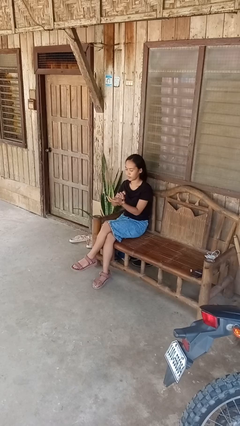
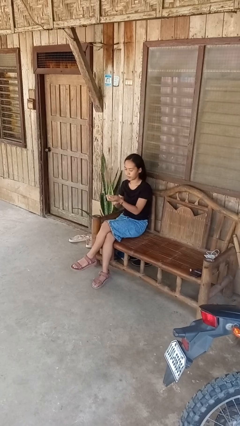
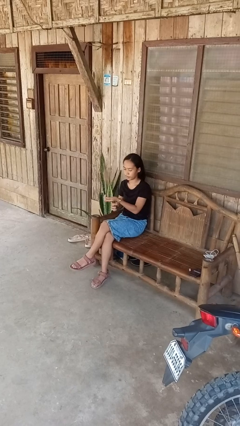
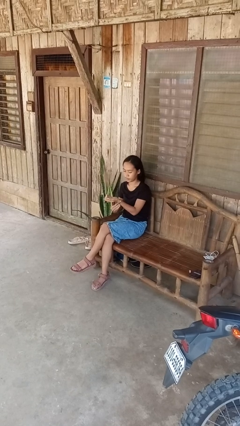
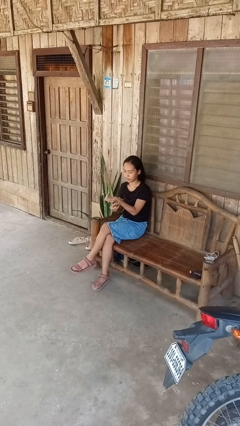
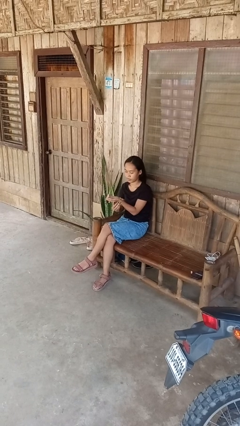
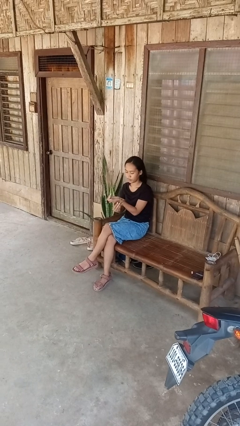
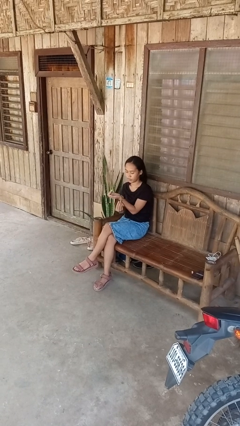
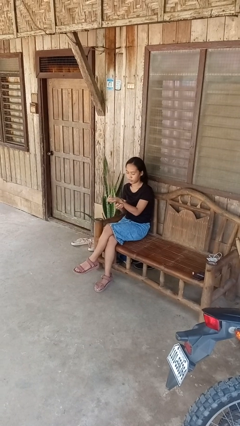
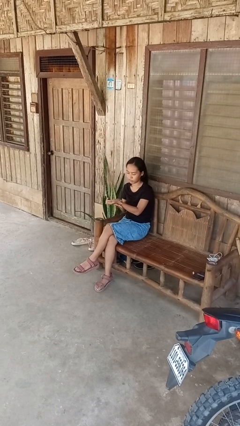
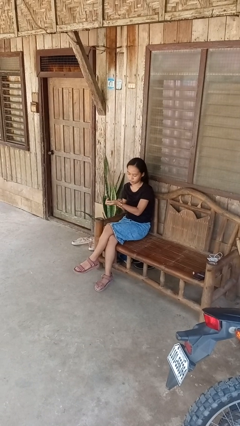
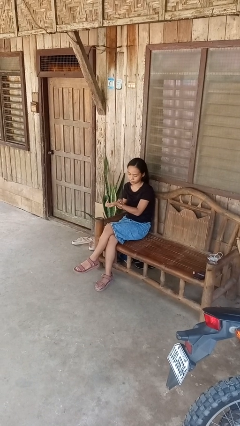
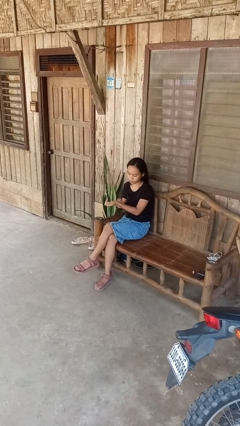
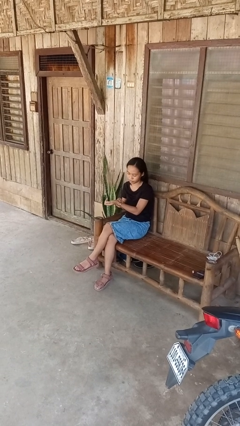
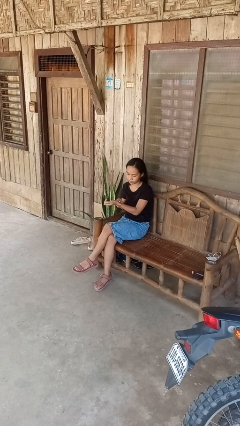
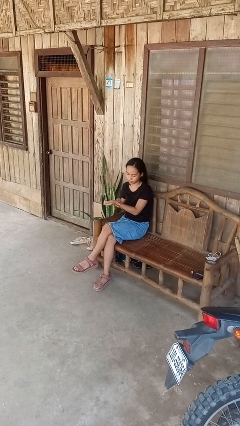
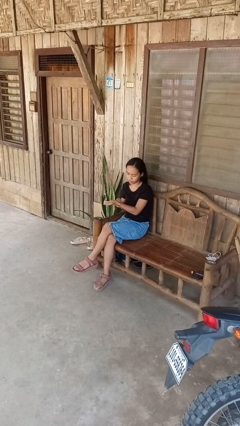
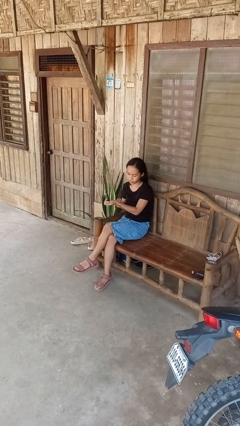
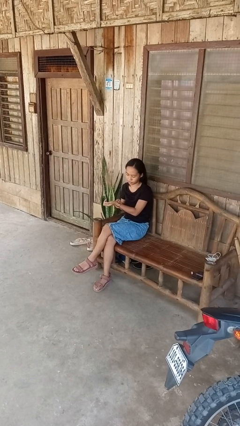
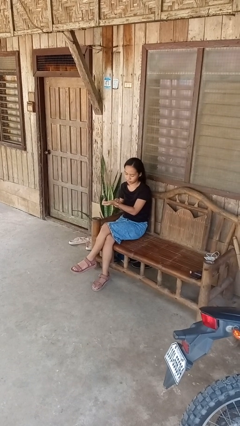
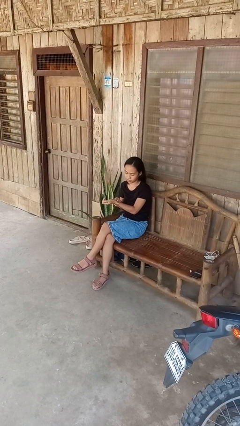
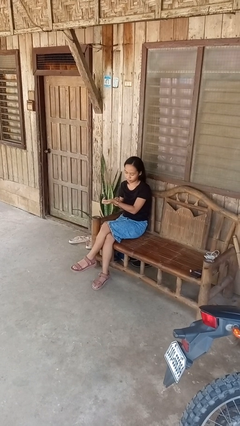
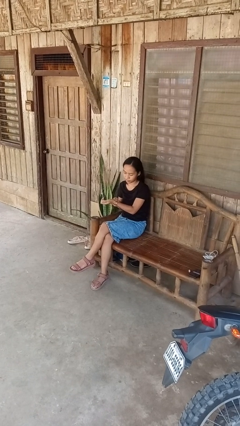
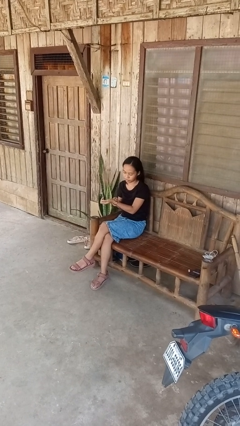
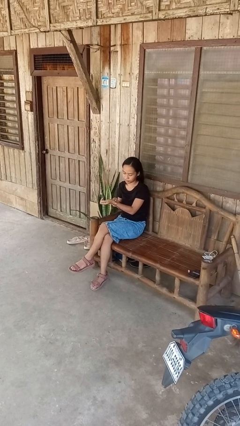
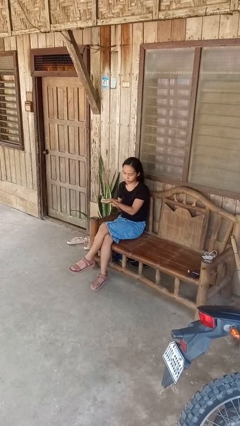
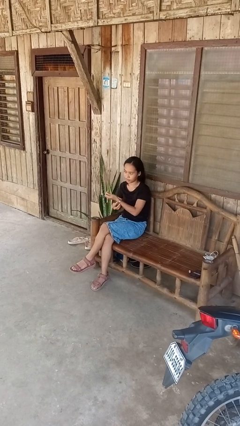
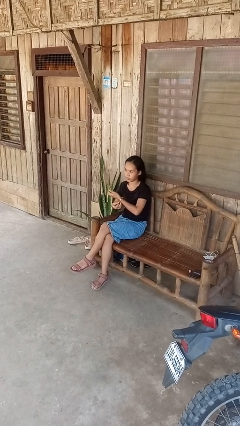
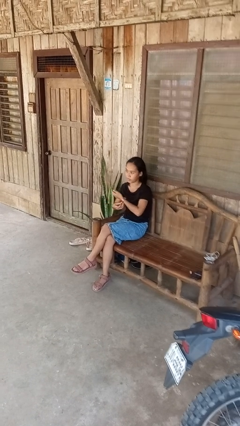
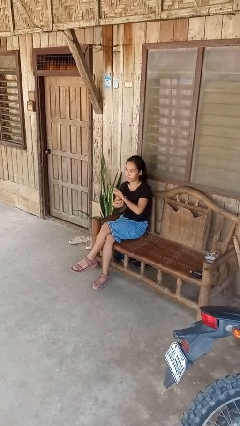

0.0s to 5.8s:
person puts on wristwatch

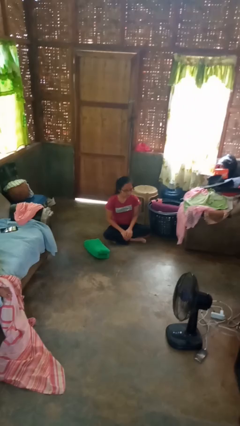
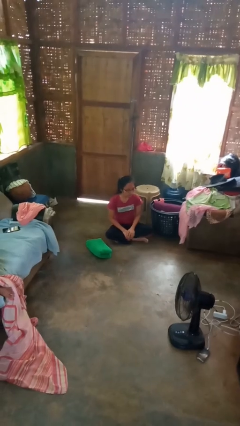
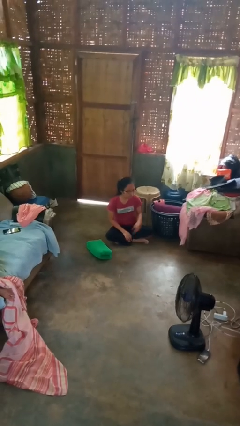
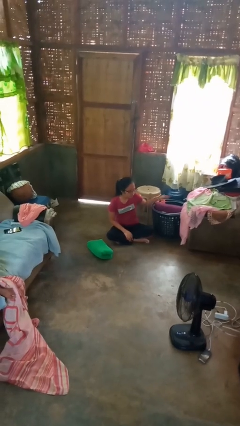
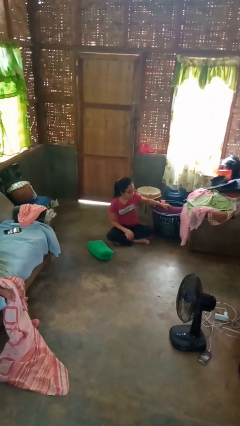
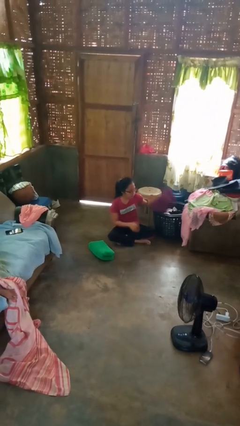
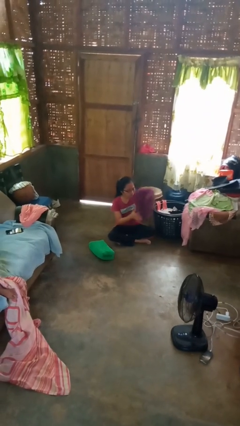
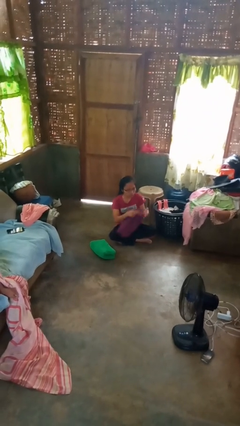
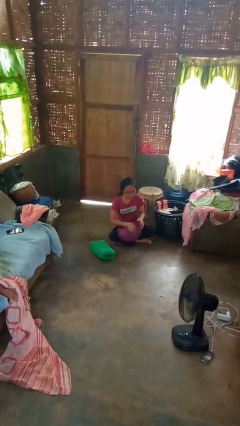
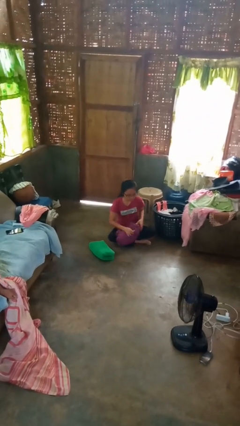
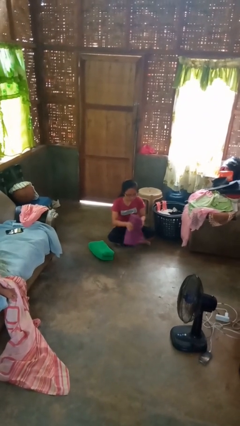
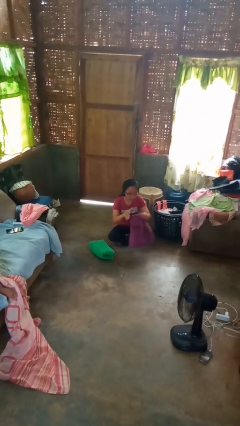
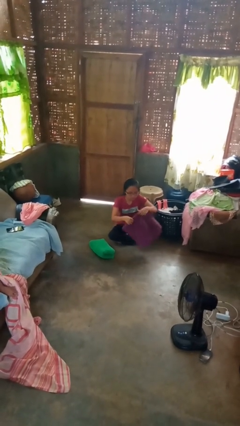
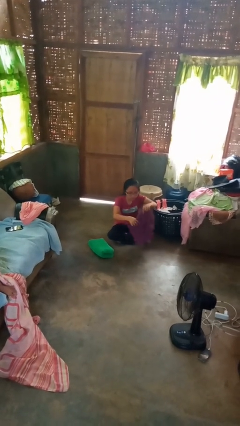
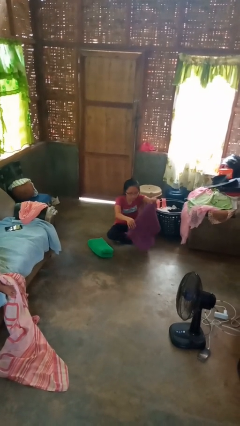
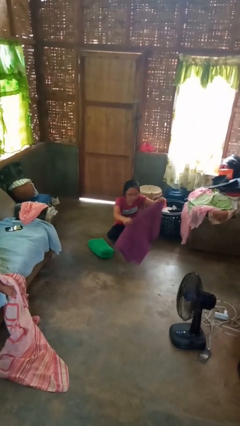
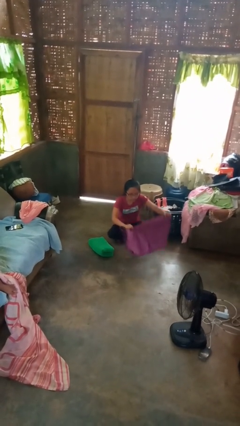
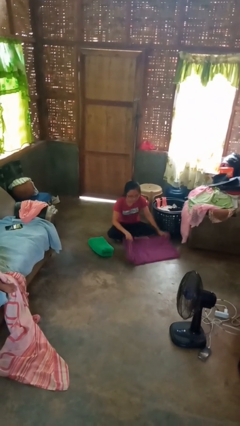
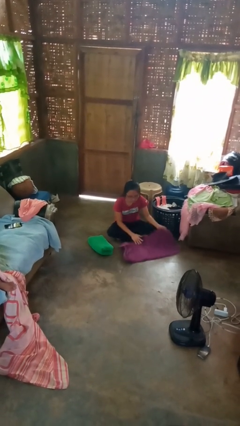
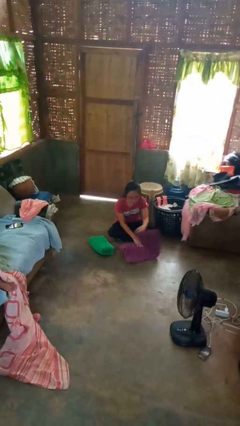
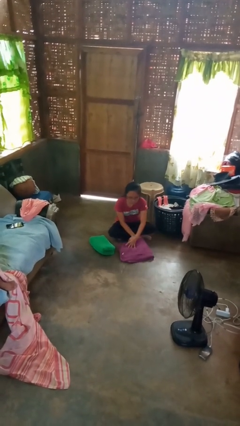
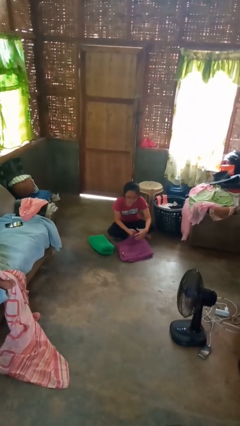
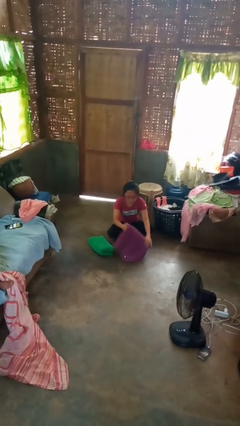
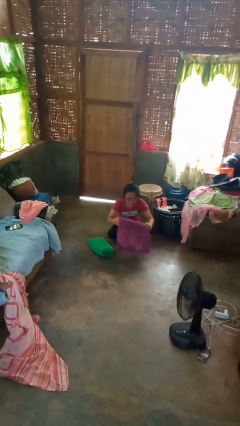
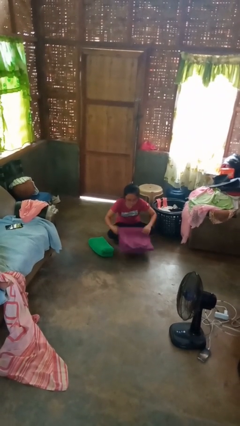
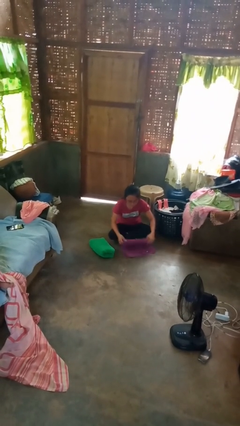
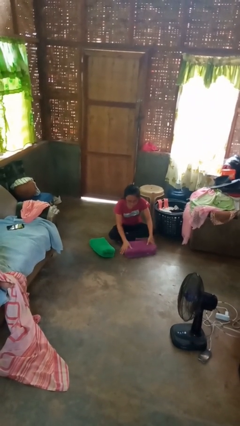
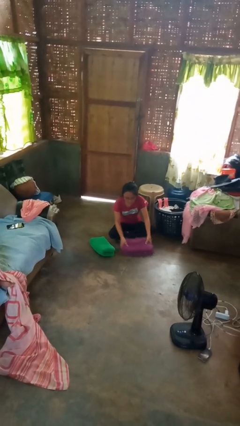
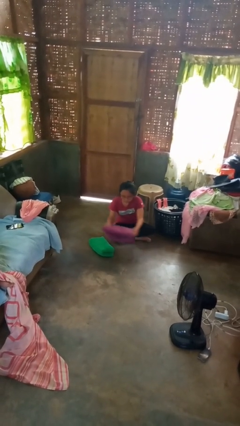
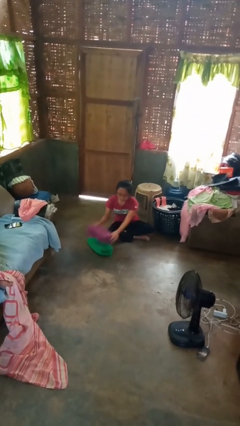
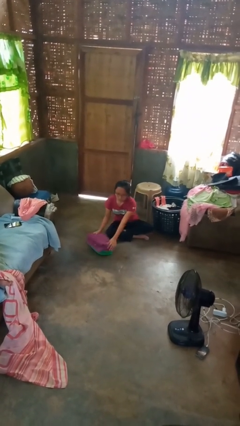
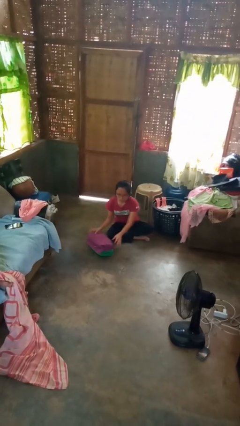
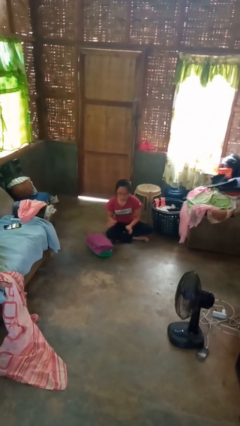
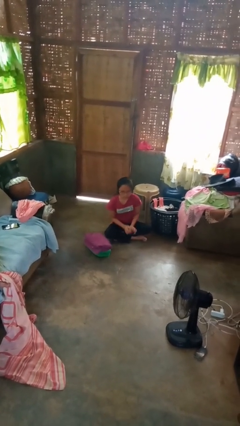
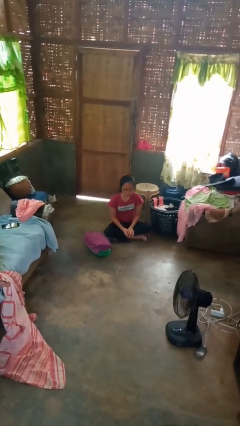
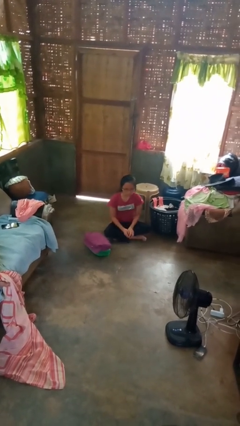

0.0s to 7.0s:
person folds towel

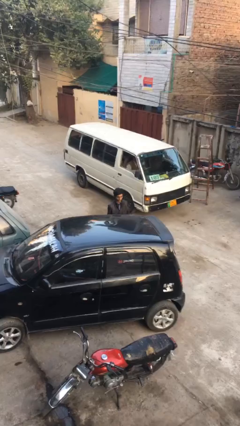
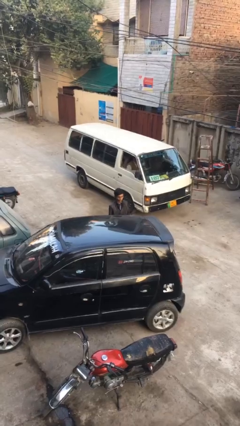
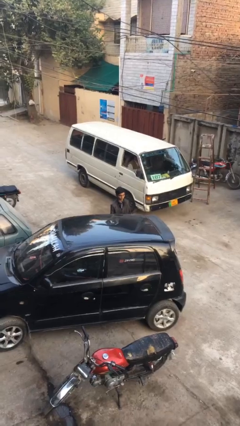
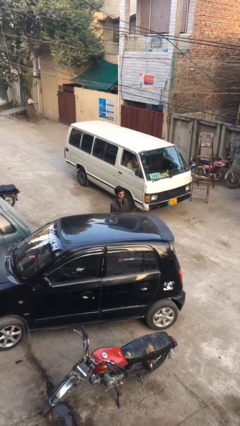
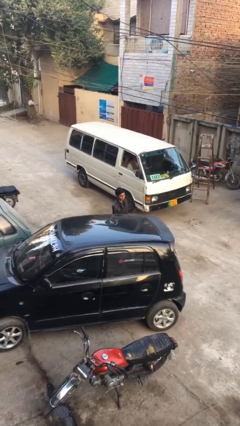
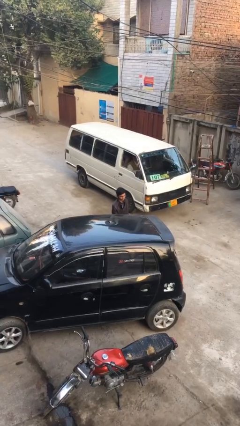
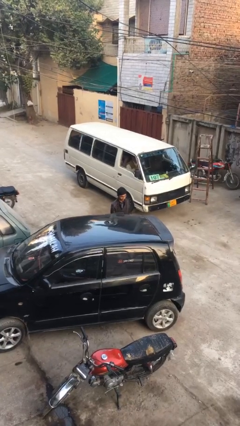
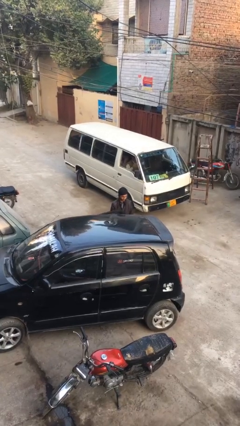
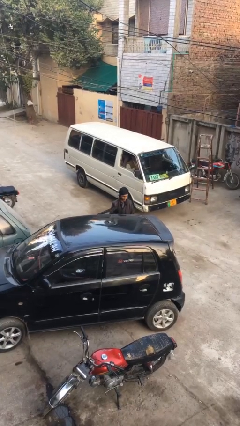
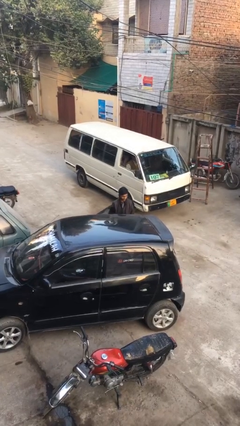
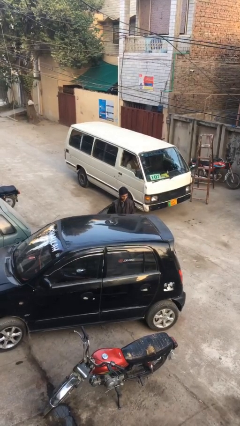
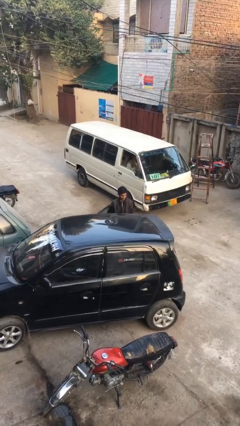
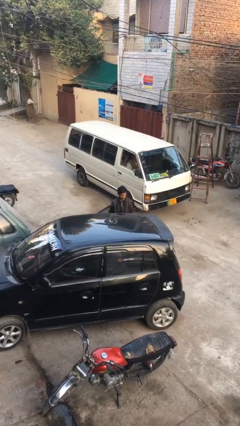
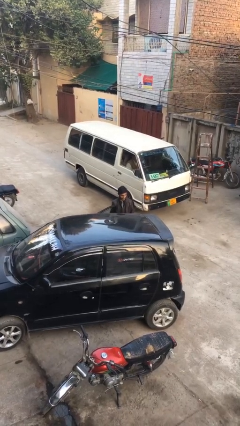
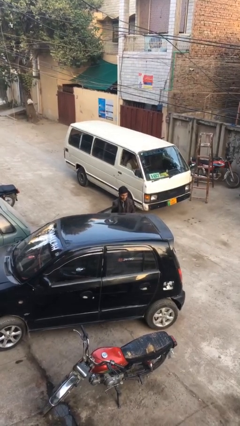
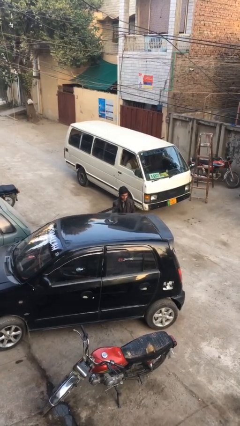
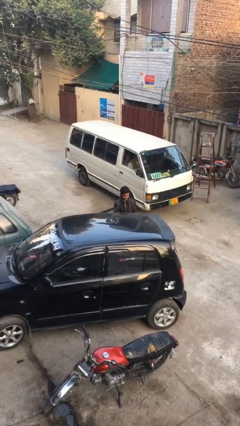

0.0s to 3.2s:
person opens car door

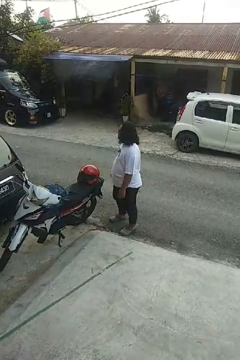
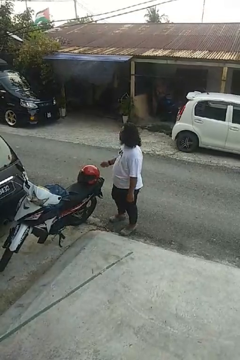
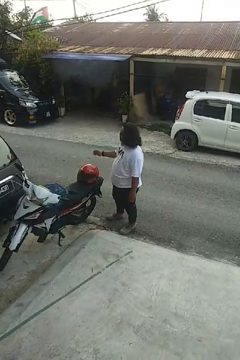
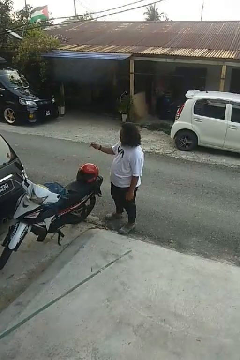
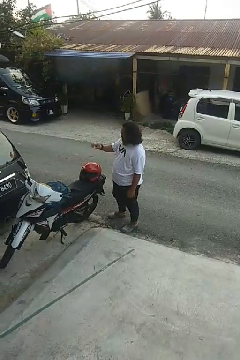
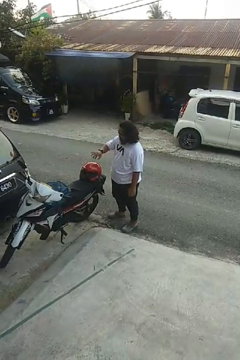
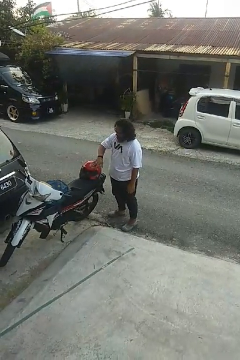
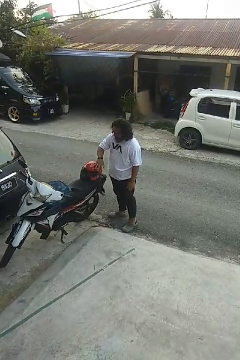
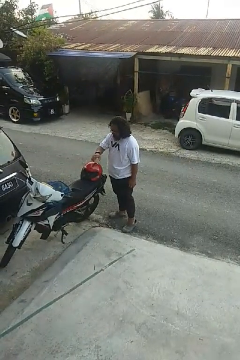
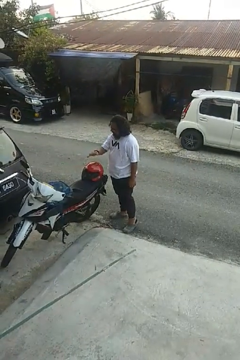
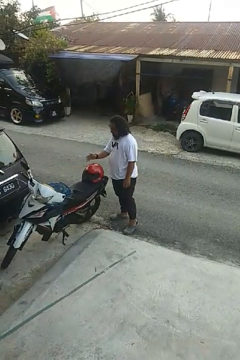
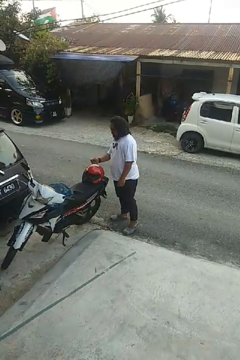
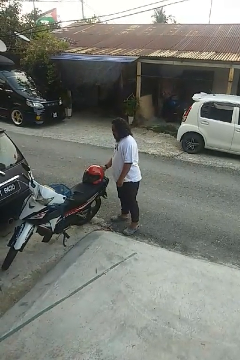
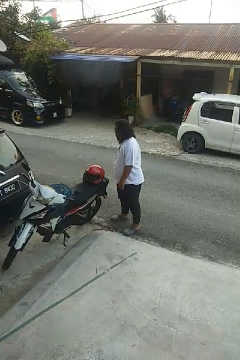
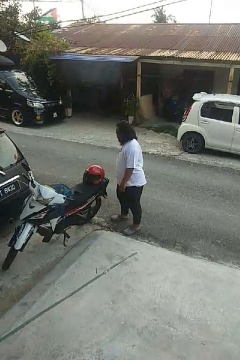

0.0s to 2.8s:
person waves hand over object
